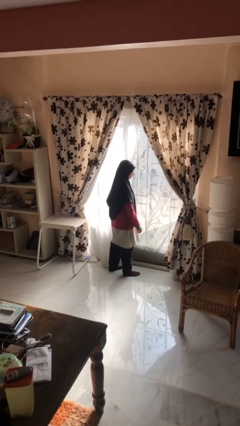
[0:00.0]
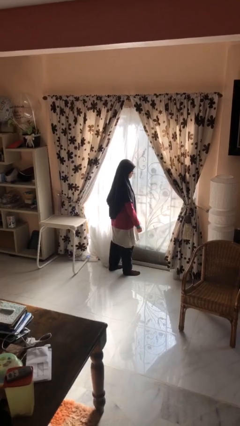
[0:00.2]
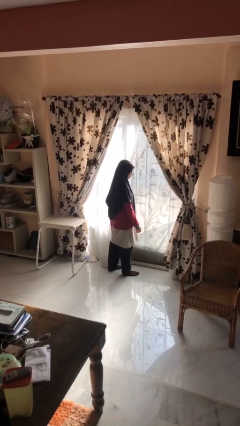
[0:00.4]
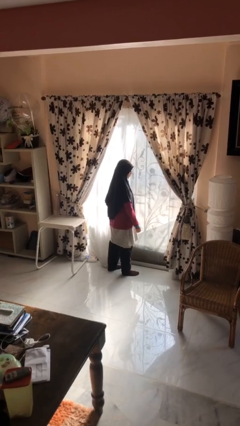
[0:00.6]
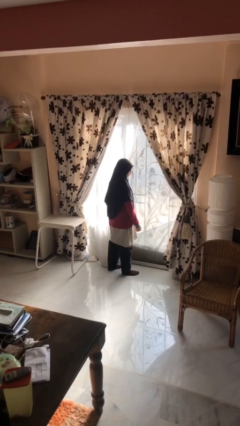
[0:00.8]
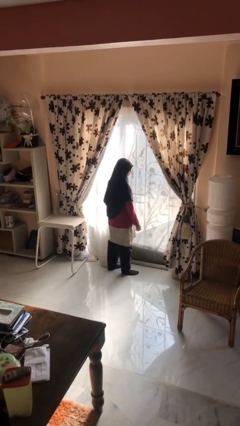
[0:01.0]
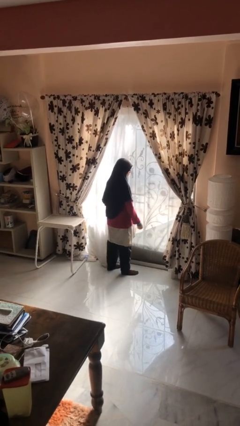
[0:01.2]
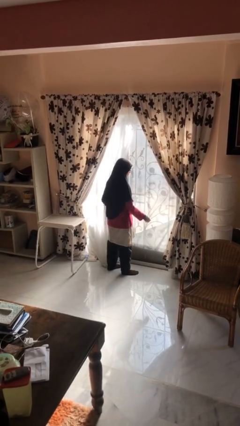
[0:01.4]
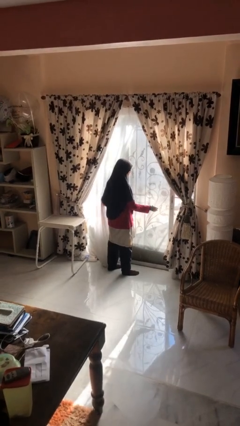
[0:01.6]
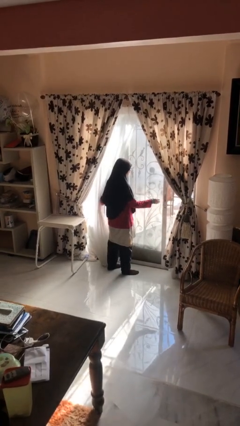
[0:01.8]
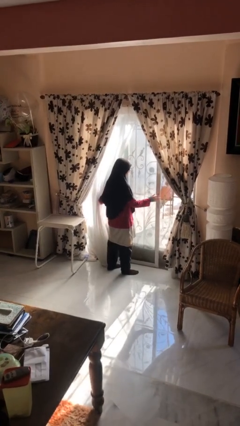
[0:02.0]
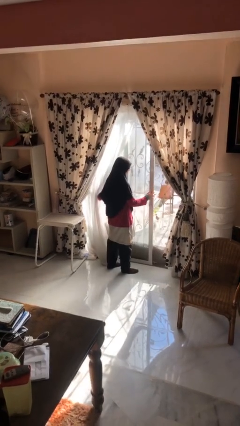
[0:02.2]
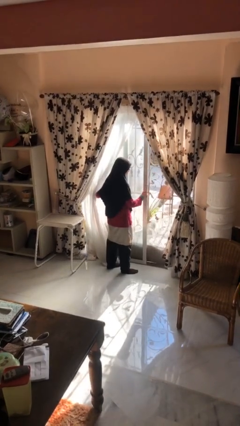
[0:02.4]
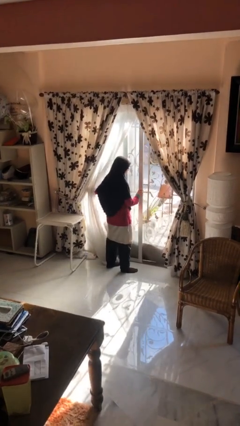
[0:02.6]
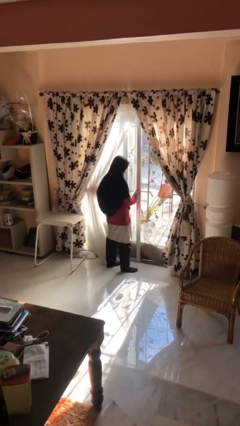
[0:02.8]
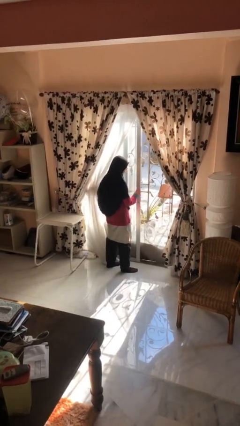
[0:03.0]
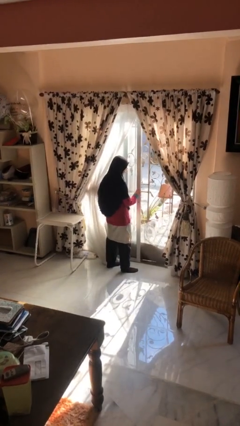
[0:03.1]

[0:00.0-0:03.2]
person opens sliding door

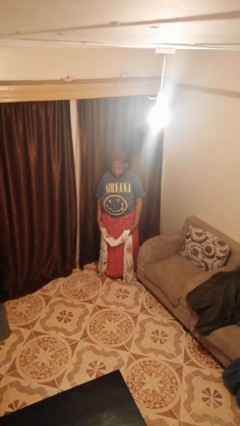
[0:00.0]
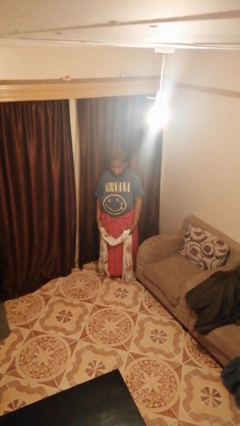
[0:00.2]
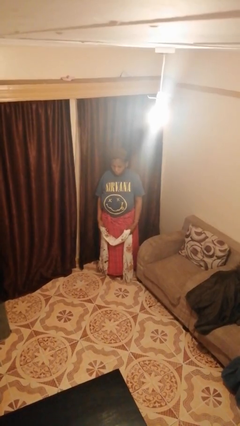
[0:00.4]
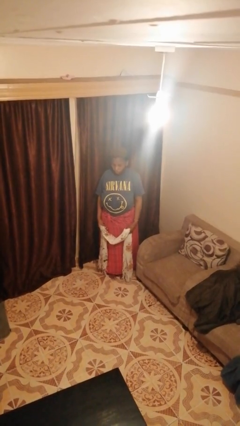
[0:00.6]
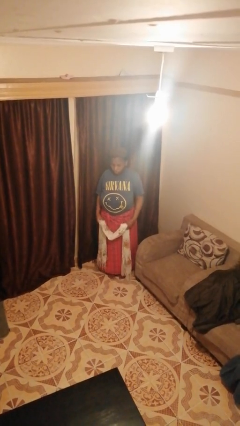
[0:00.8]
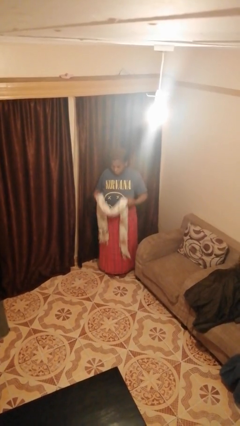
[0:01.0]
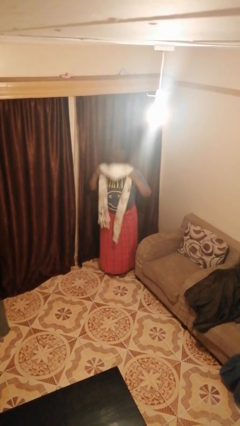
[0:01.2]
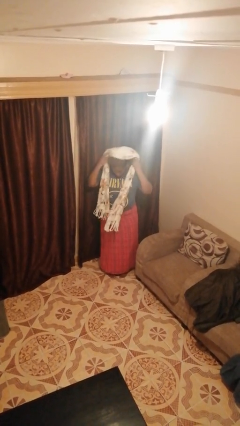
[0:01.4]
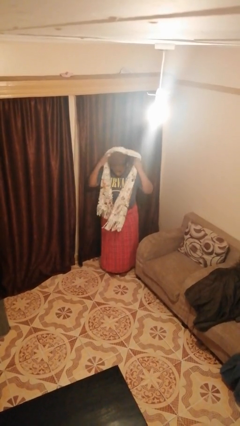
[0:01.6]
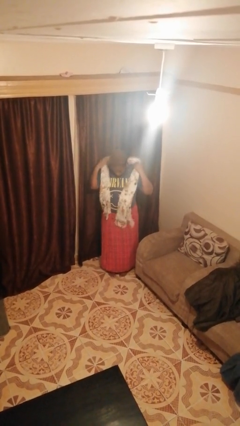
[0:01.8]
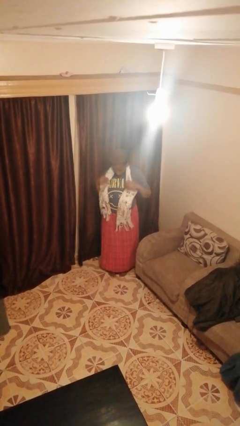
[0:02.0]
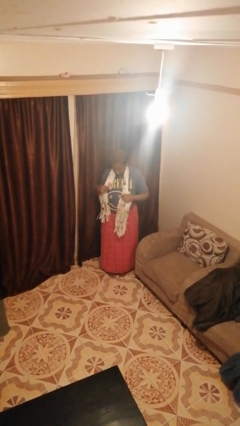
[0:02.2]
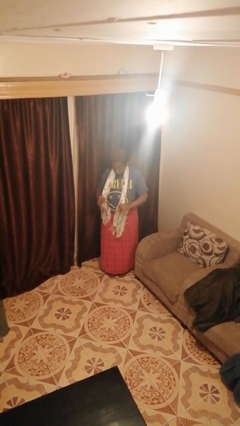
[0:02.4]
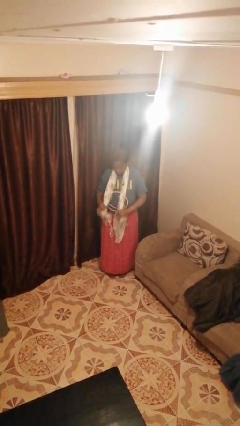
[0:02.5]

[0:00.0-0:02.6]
person puts on scarf

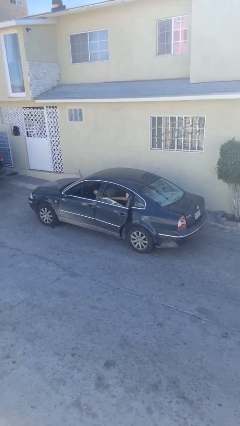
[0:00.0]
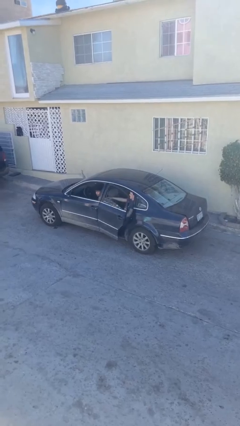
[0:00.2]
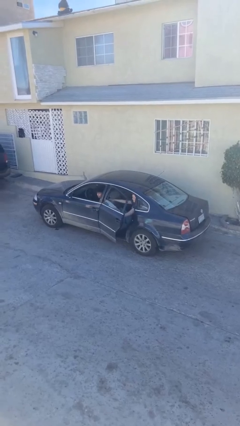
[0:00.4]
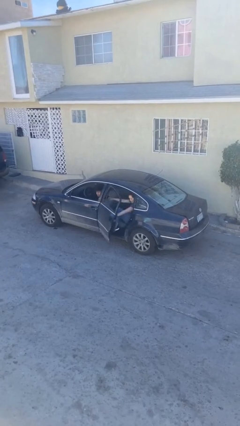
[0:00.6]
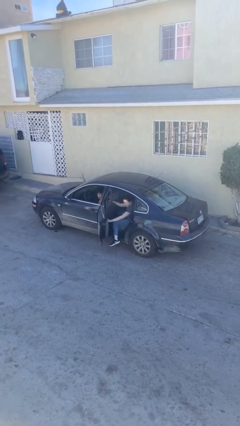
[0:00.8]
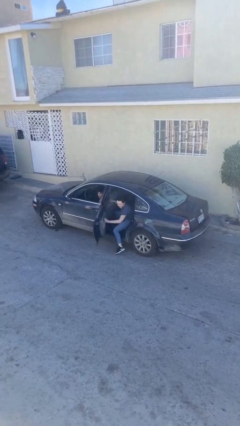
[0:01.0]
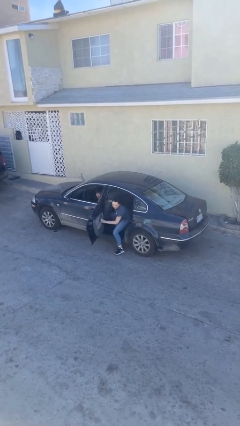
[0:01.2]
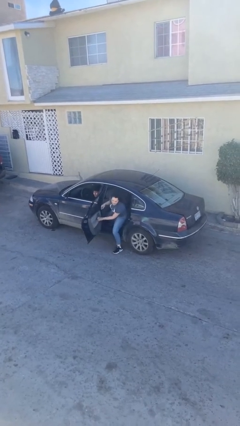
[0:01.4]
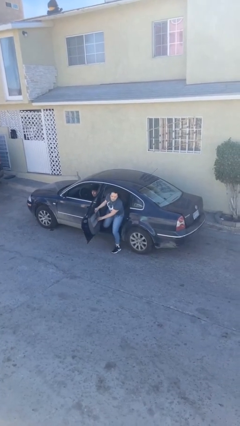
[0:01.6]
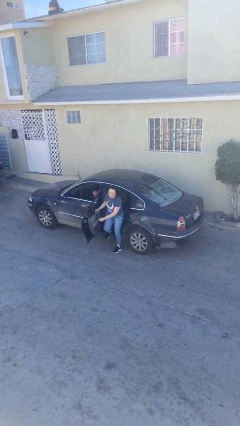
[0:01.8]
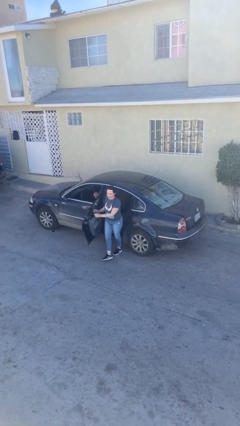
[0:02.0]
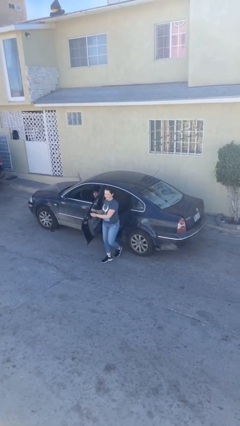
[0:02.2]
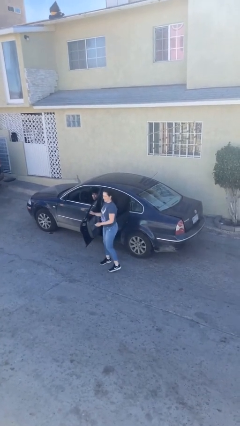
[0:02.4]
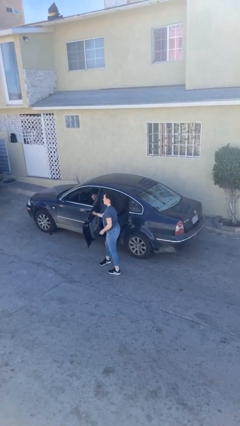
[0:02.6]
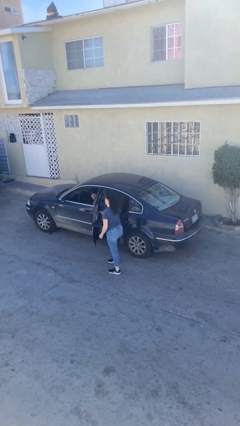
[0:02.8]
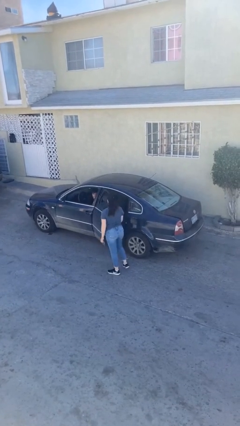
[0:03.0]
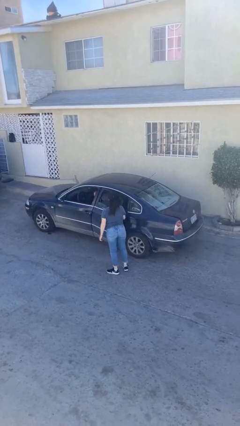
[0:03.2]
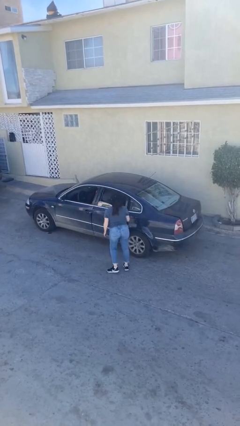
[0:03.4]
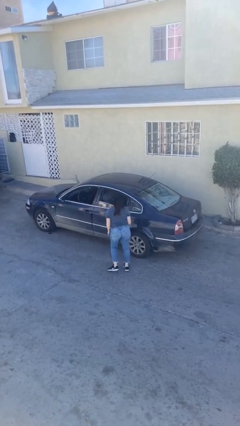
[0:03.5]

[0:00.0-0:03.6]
car drops off person

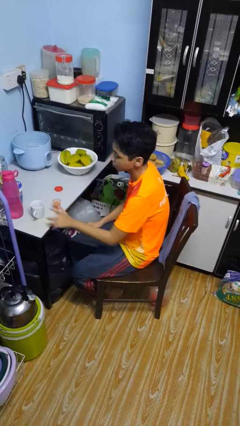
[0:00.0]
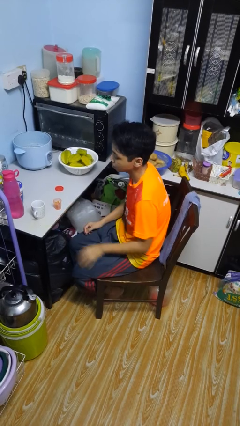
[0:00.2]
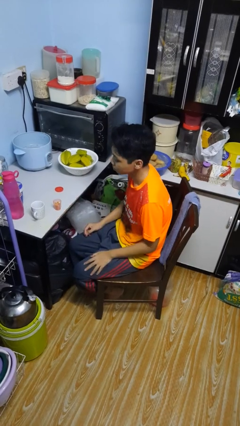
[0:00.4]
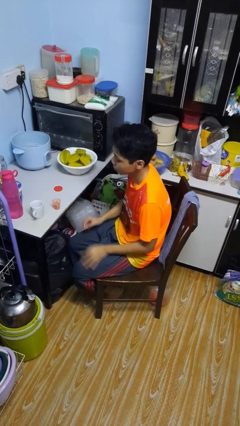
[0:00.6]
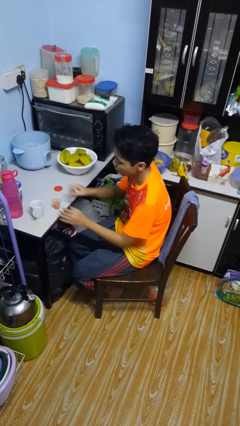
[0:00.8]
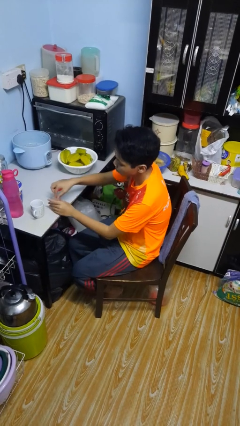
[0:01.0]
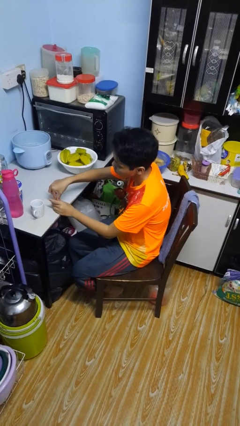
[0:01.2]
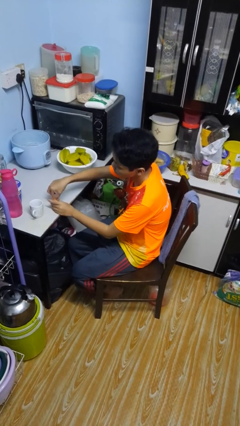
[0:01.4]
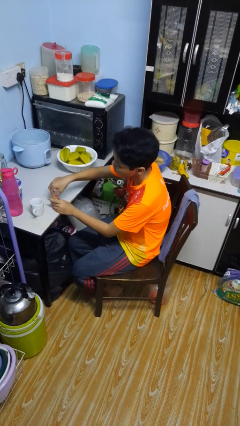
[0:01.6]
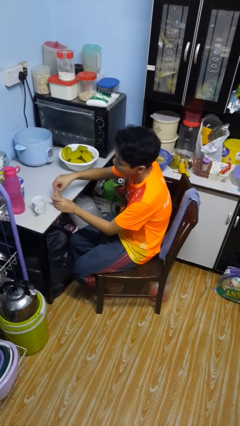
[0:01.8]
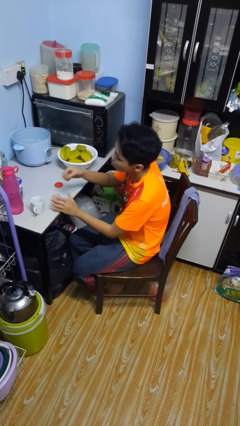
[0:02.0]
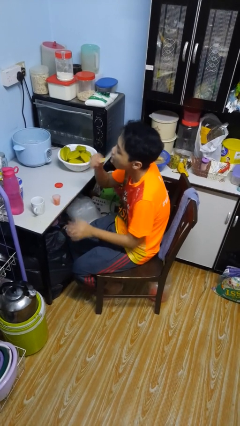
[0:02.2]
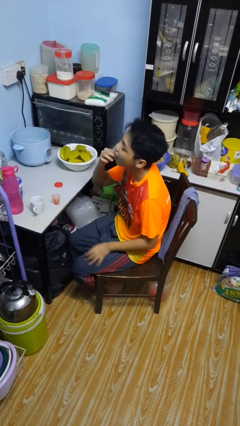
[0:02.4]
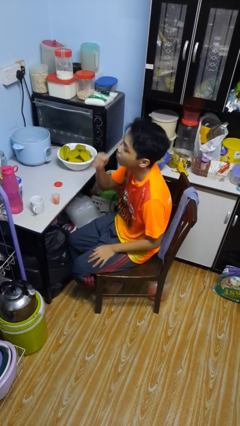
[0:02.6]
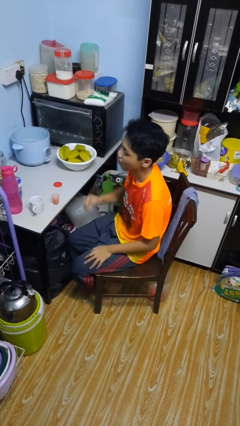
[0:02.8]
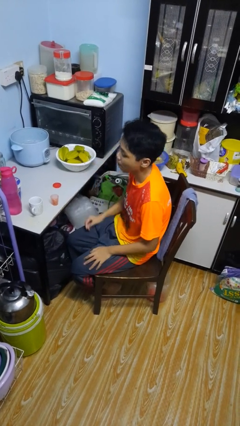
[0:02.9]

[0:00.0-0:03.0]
person takes medicine pills

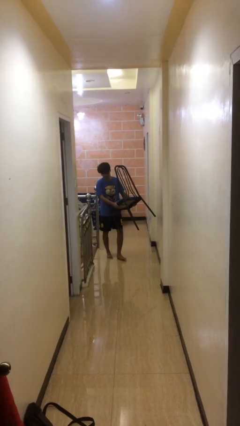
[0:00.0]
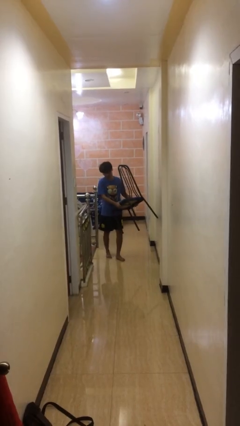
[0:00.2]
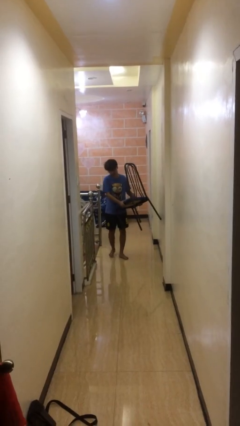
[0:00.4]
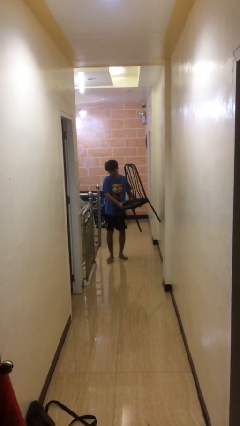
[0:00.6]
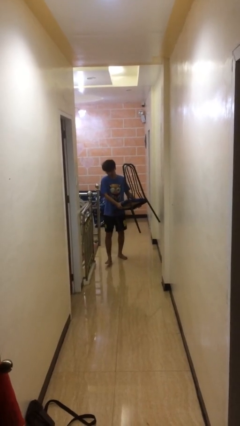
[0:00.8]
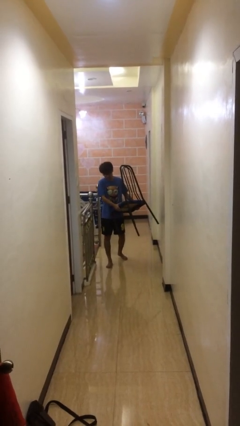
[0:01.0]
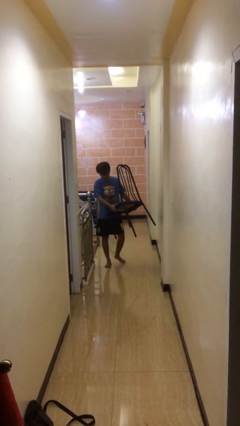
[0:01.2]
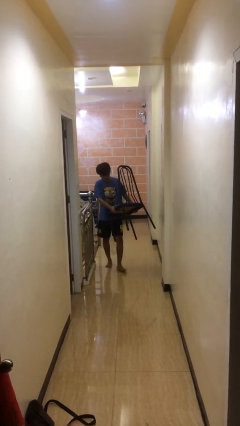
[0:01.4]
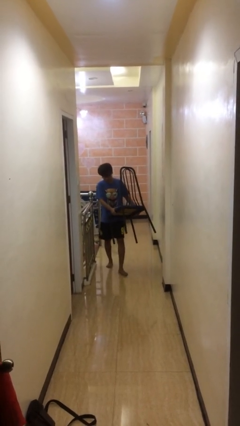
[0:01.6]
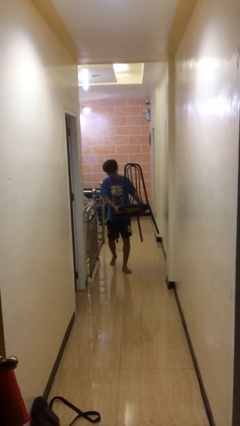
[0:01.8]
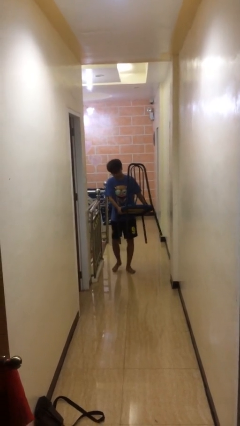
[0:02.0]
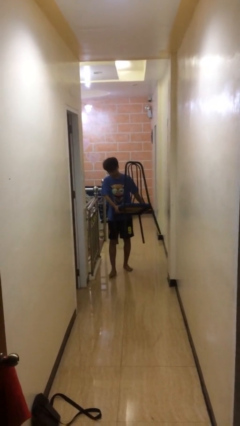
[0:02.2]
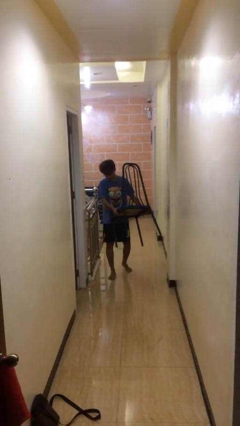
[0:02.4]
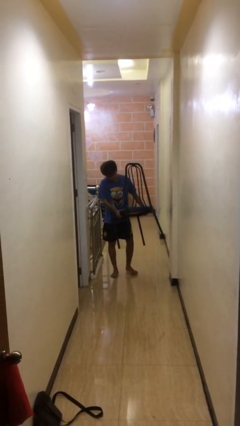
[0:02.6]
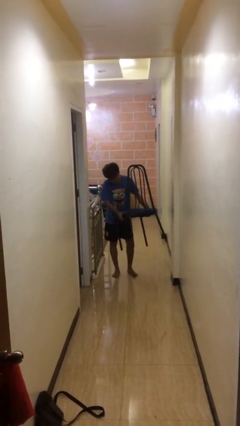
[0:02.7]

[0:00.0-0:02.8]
person carries heavy object

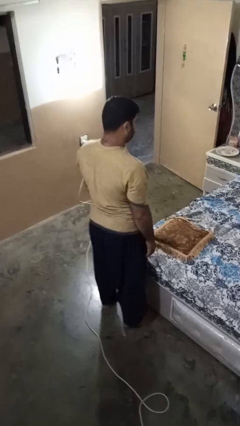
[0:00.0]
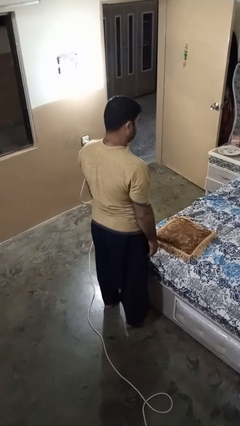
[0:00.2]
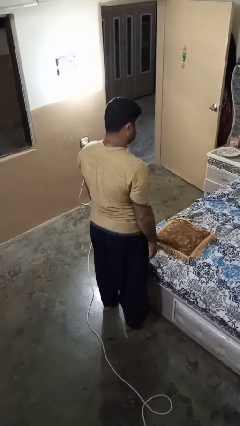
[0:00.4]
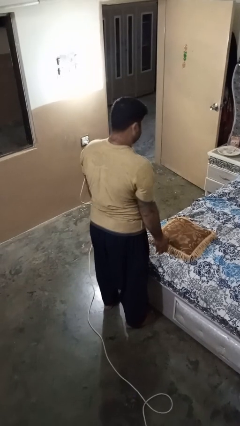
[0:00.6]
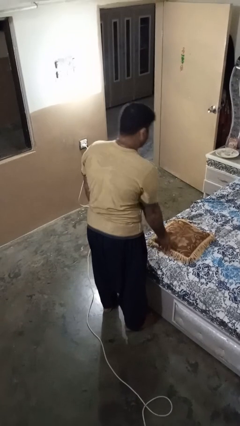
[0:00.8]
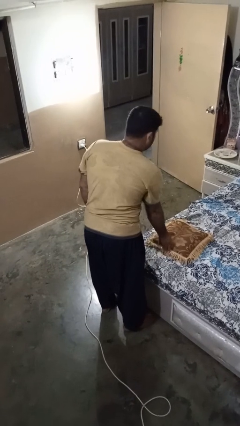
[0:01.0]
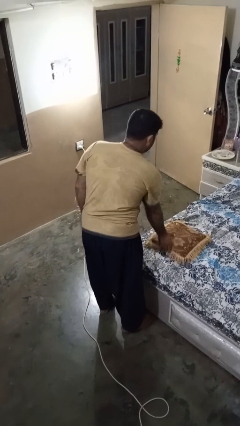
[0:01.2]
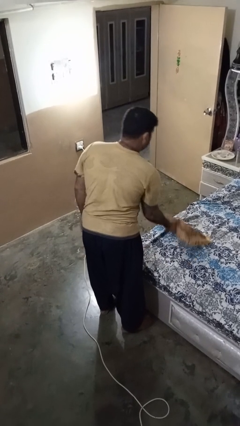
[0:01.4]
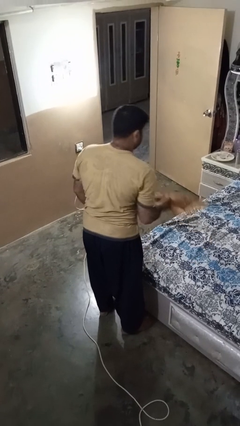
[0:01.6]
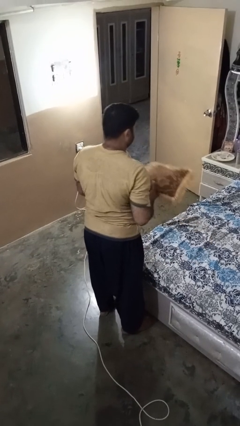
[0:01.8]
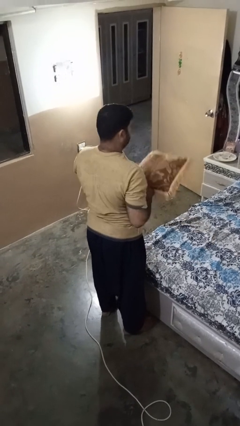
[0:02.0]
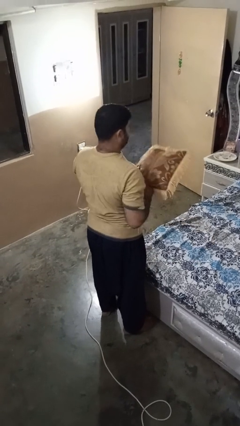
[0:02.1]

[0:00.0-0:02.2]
person picks up object from bed

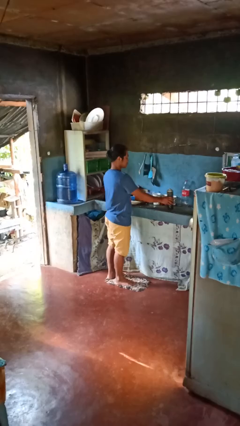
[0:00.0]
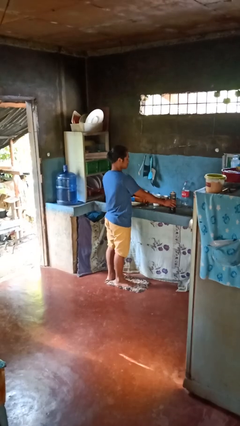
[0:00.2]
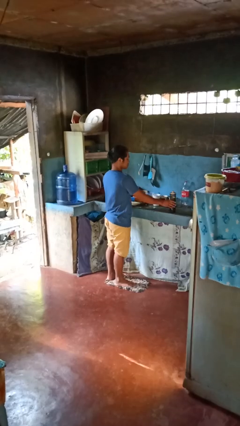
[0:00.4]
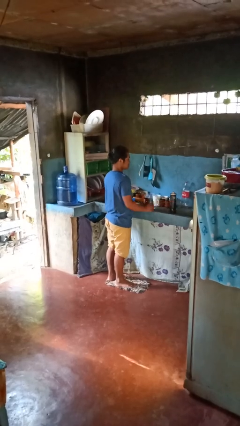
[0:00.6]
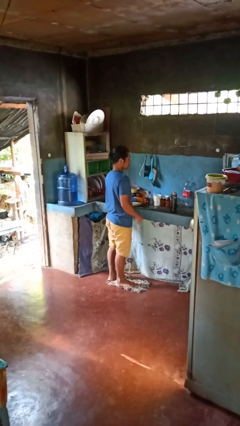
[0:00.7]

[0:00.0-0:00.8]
person puts down object on countertop
